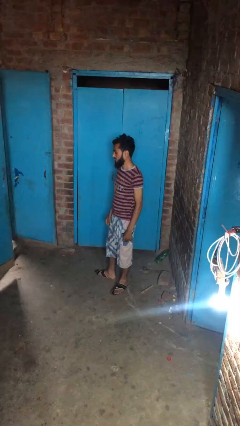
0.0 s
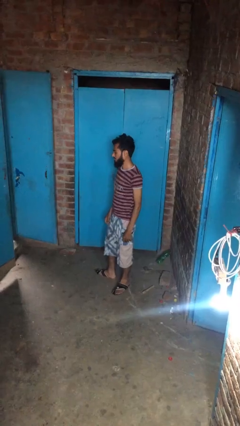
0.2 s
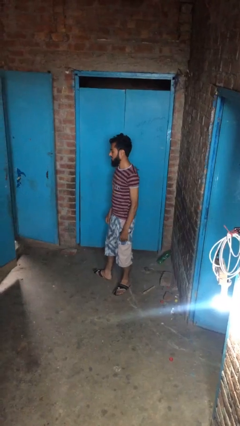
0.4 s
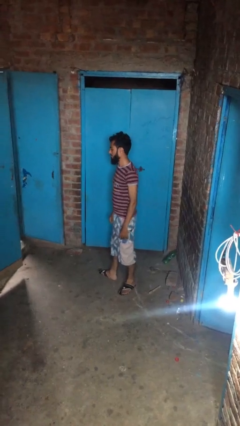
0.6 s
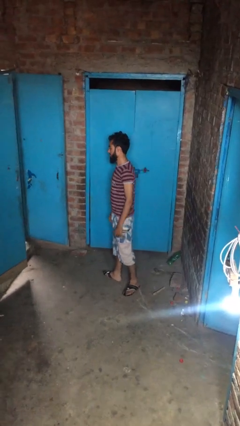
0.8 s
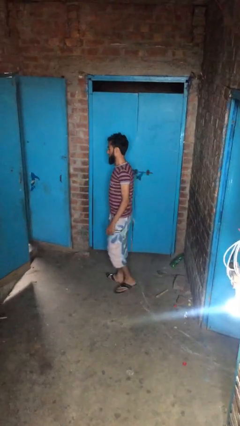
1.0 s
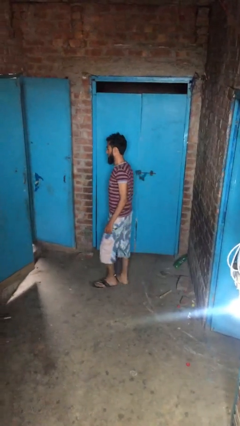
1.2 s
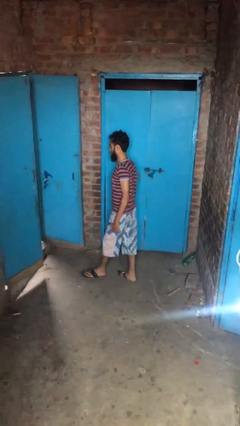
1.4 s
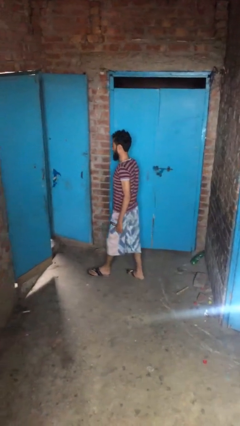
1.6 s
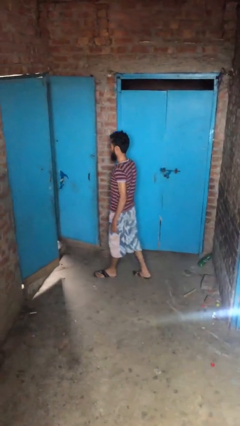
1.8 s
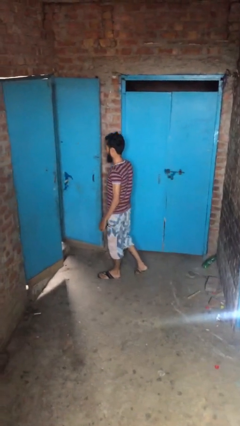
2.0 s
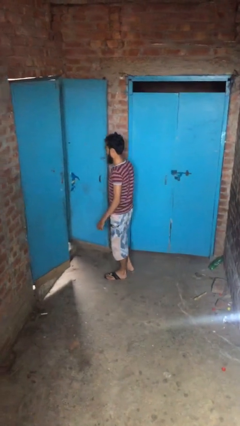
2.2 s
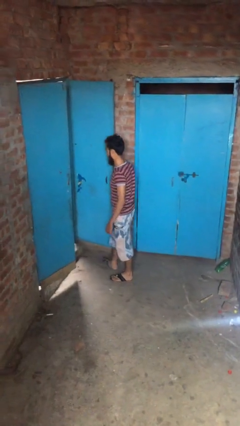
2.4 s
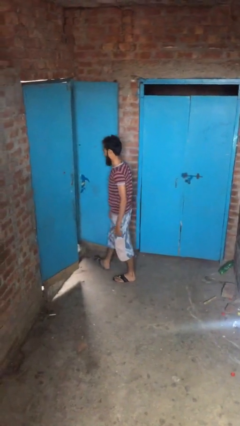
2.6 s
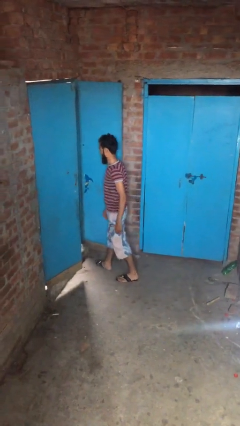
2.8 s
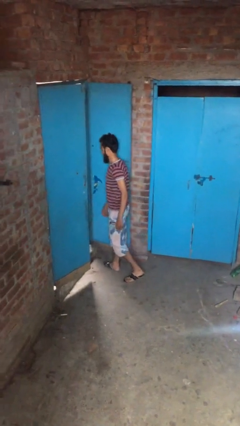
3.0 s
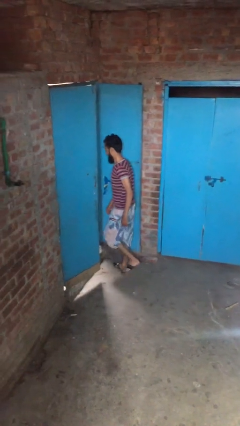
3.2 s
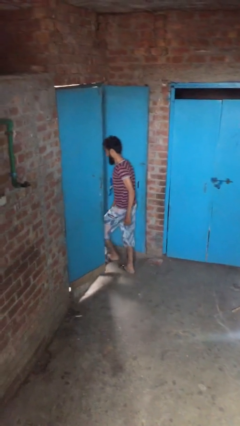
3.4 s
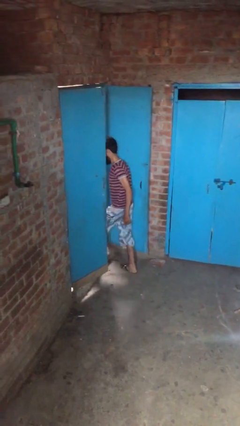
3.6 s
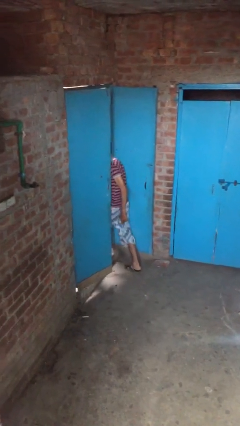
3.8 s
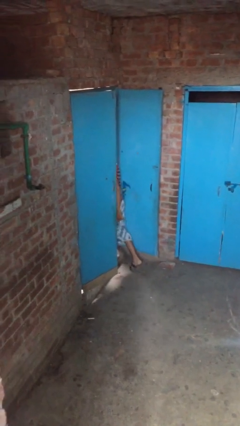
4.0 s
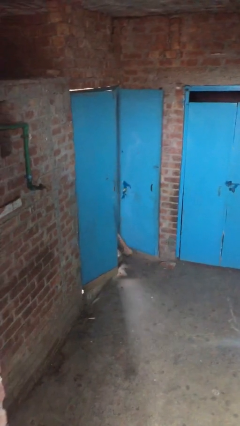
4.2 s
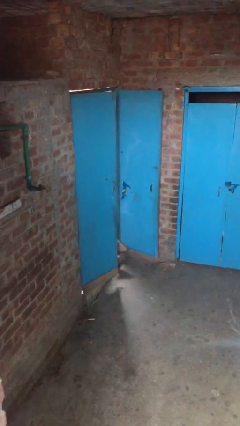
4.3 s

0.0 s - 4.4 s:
person exits scene through structure

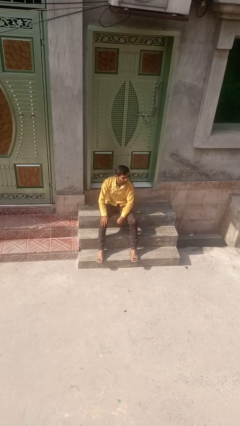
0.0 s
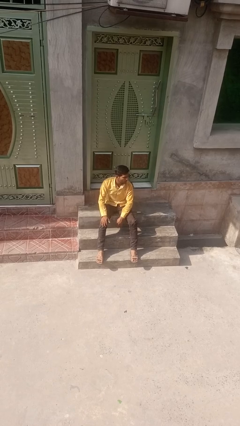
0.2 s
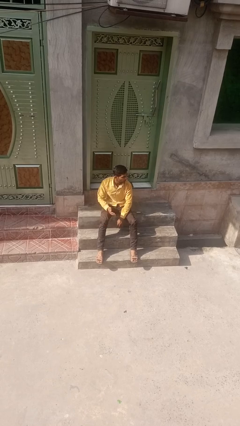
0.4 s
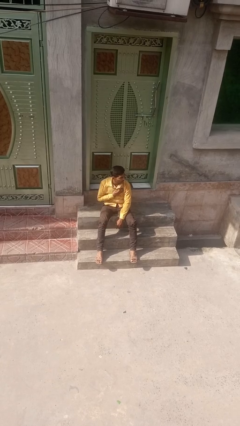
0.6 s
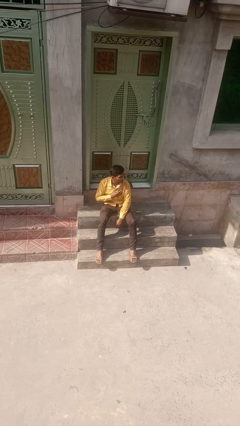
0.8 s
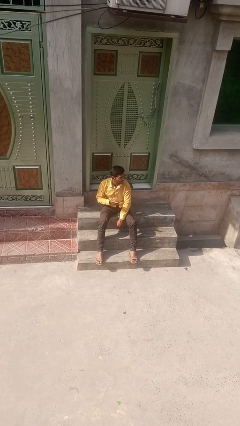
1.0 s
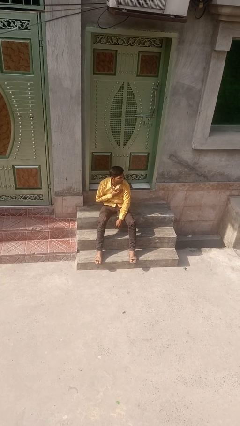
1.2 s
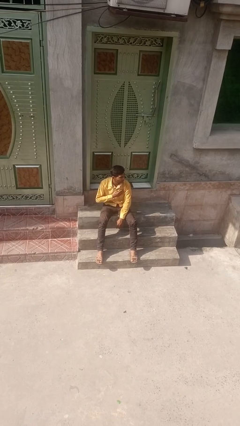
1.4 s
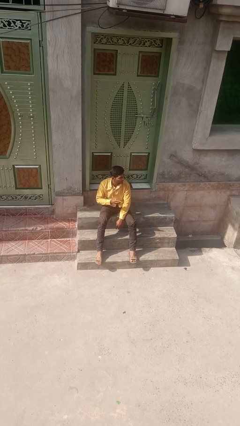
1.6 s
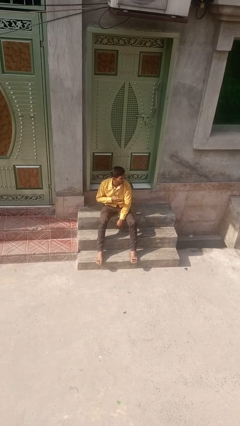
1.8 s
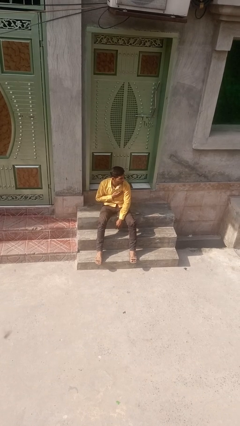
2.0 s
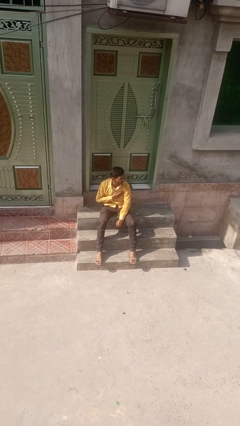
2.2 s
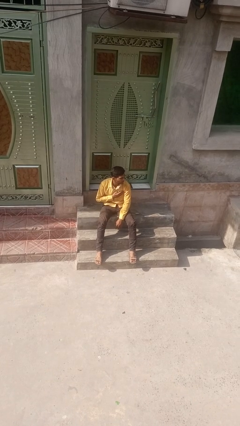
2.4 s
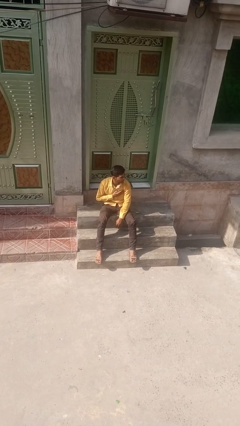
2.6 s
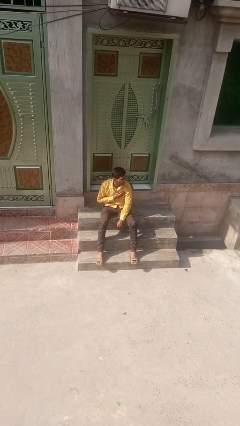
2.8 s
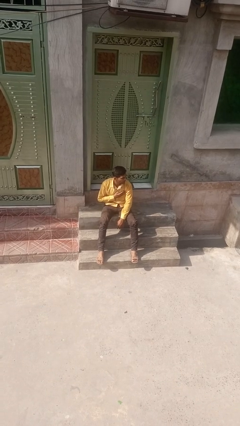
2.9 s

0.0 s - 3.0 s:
person drums on chest

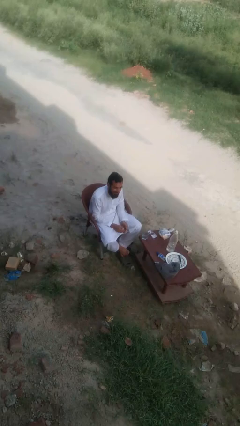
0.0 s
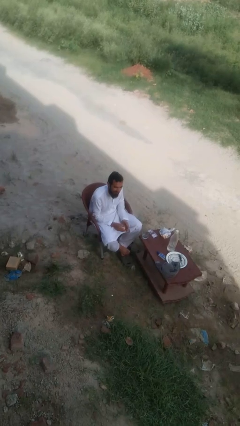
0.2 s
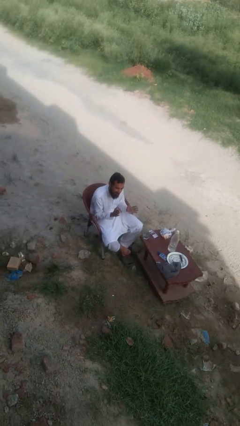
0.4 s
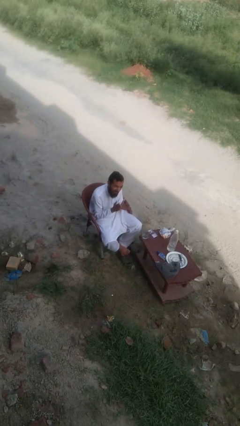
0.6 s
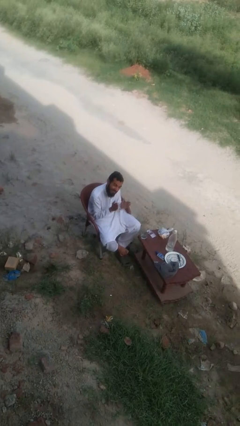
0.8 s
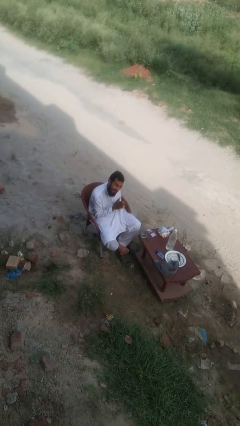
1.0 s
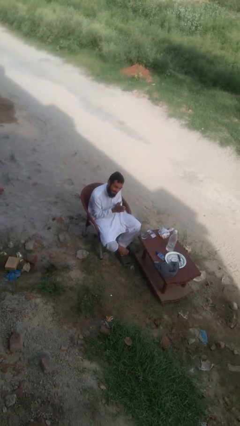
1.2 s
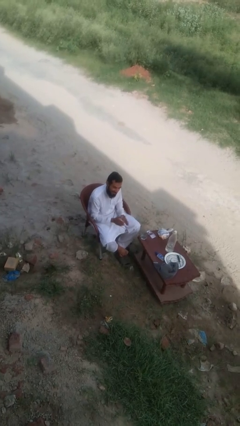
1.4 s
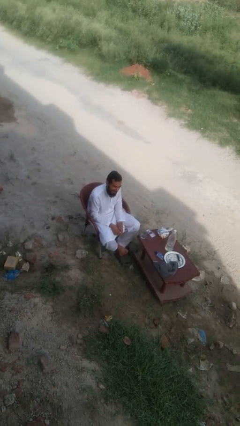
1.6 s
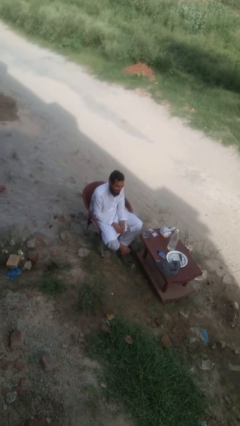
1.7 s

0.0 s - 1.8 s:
person claps hands

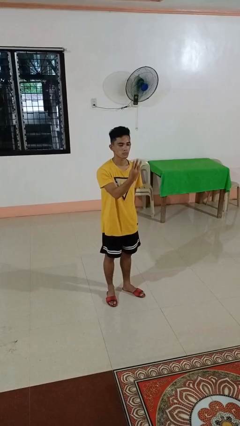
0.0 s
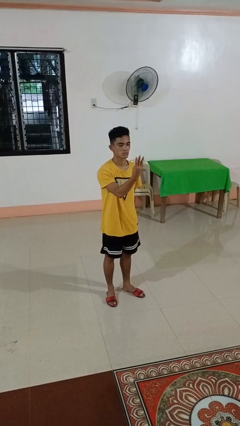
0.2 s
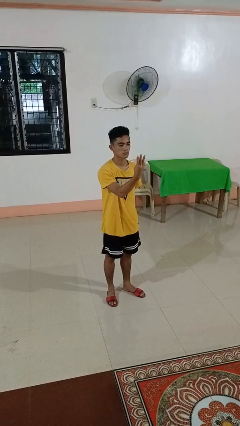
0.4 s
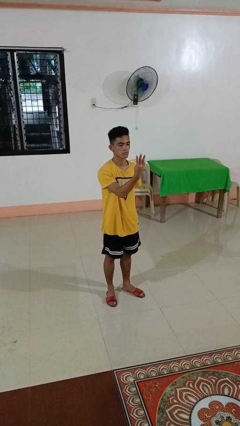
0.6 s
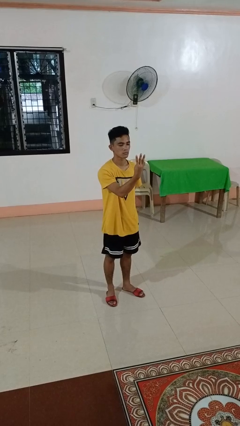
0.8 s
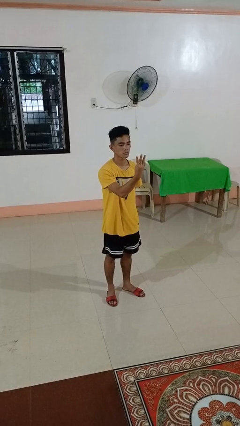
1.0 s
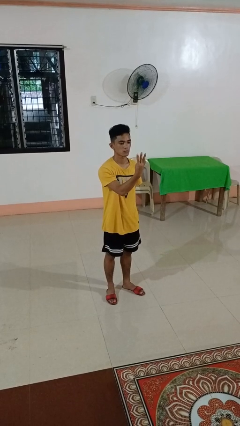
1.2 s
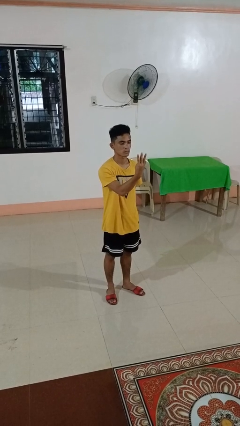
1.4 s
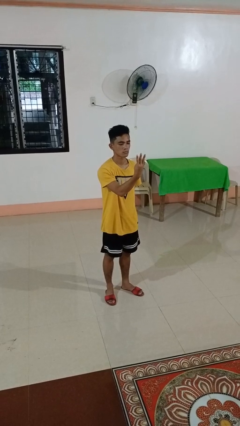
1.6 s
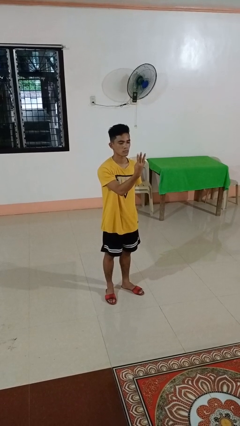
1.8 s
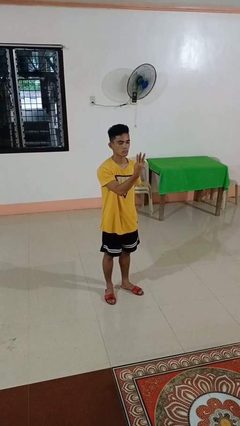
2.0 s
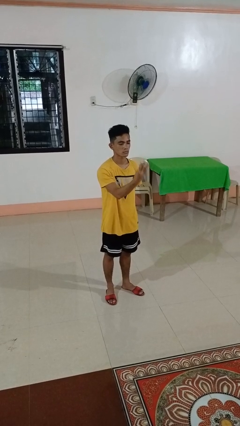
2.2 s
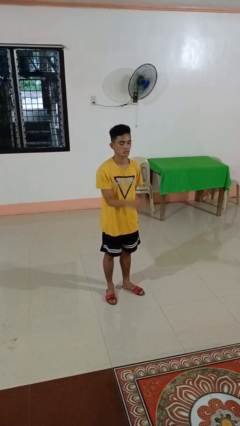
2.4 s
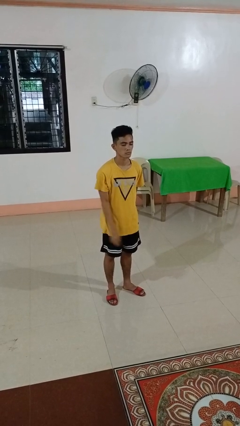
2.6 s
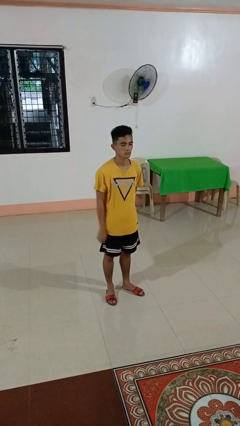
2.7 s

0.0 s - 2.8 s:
person gestures number three

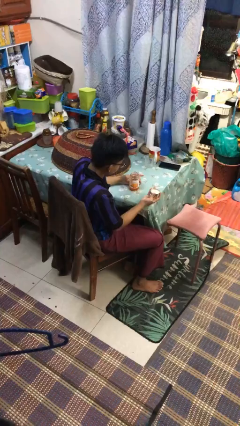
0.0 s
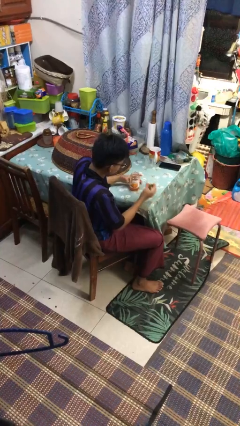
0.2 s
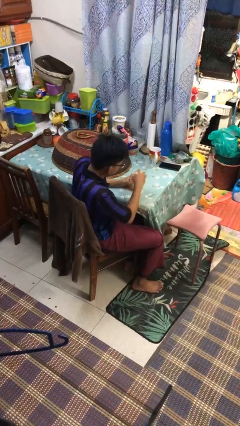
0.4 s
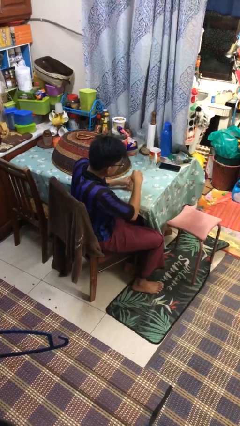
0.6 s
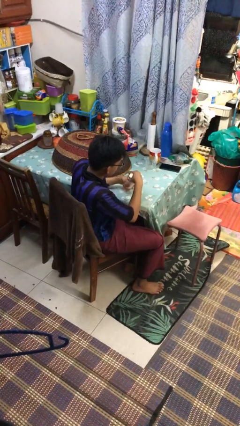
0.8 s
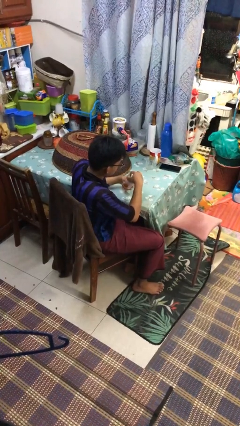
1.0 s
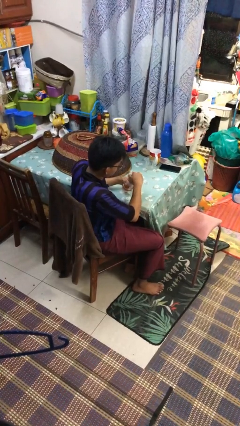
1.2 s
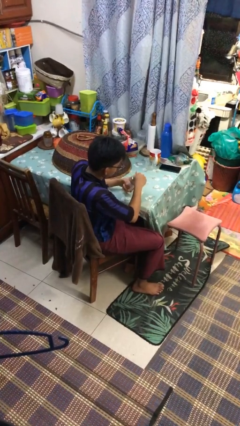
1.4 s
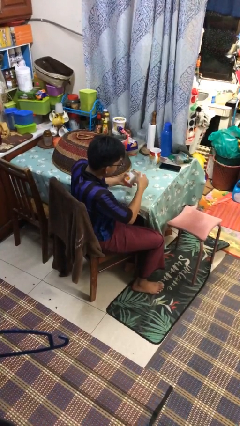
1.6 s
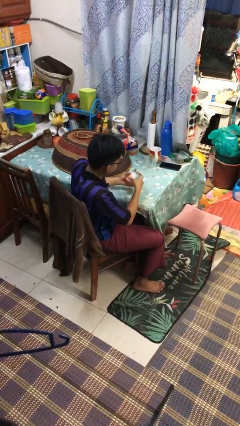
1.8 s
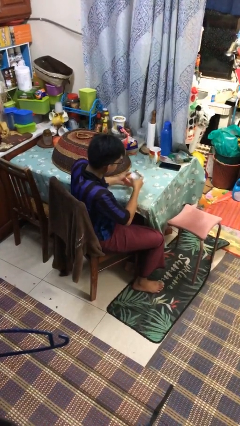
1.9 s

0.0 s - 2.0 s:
person closes jar

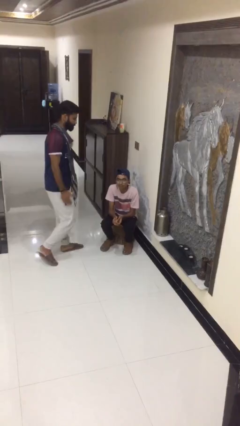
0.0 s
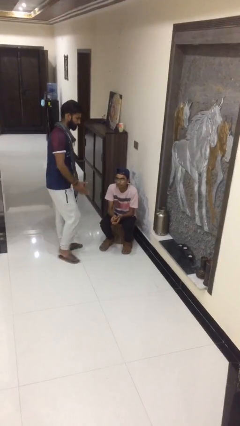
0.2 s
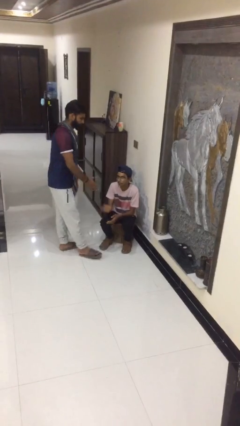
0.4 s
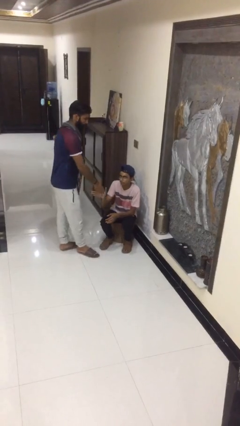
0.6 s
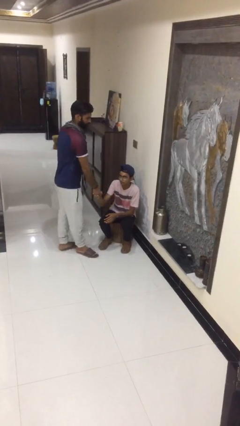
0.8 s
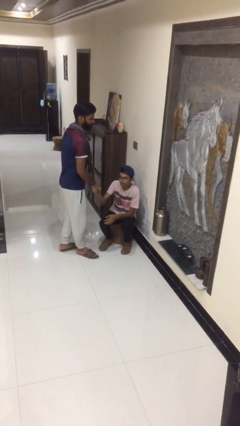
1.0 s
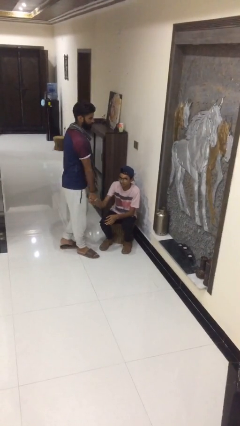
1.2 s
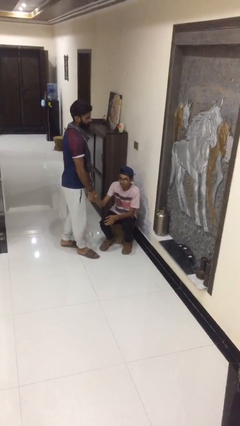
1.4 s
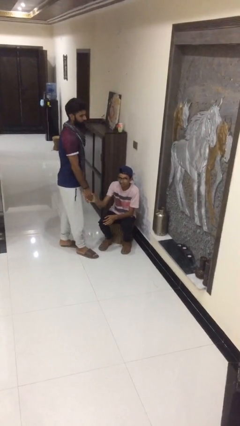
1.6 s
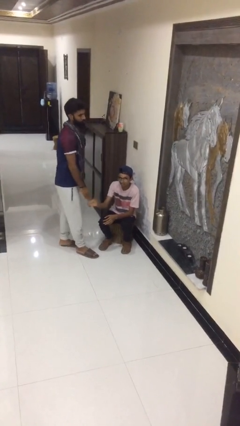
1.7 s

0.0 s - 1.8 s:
person shakes hand

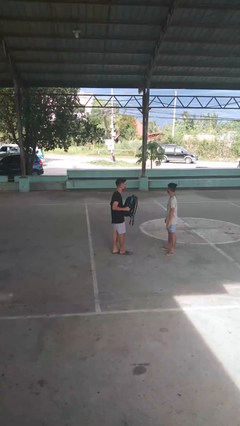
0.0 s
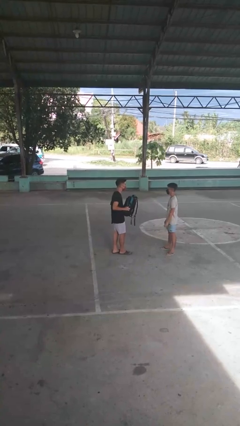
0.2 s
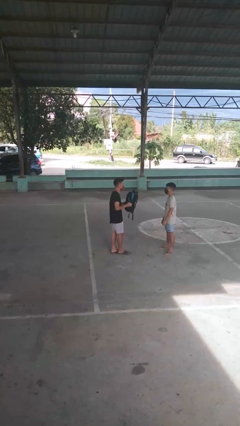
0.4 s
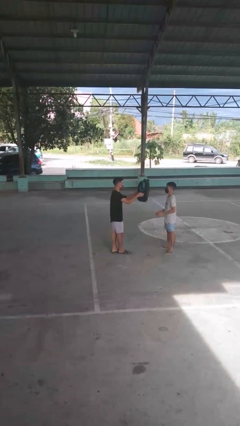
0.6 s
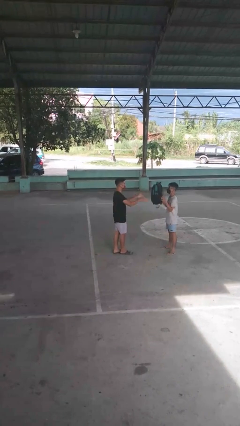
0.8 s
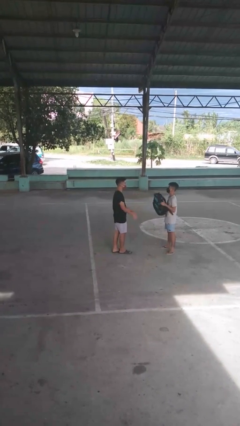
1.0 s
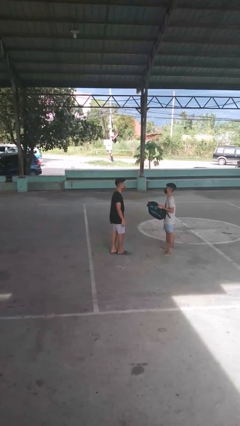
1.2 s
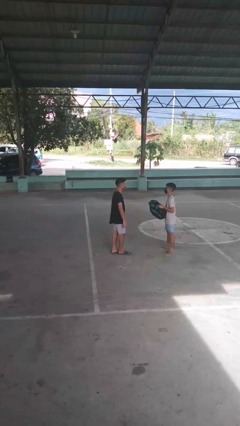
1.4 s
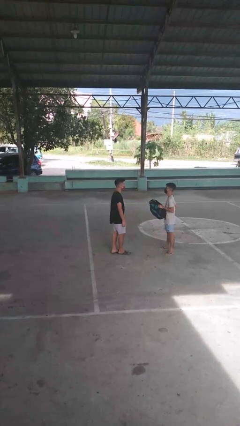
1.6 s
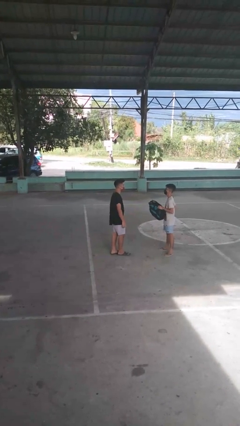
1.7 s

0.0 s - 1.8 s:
person throws object to person
